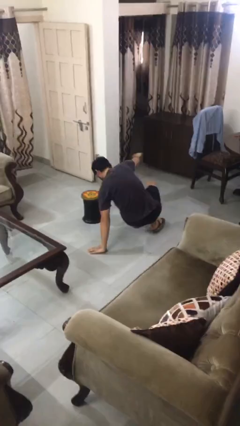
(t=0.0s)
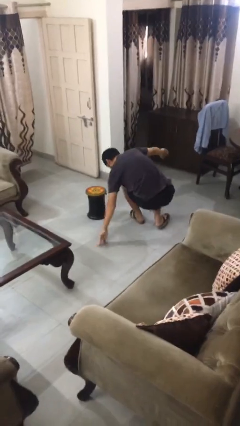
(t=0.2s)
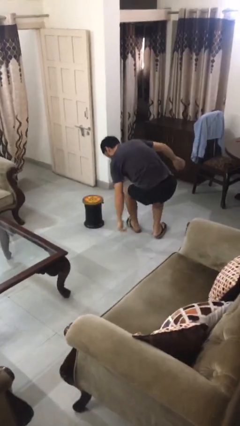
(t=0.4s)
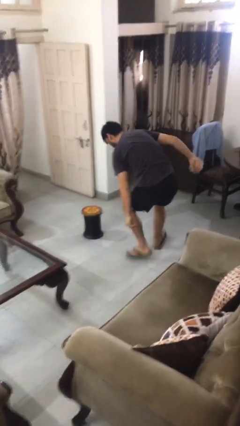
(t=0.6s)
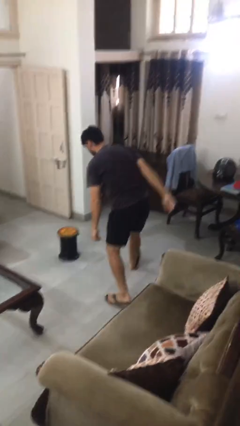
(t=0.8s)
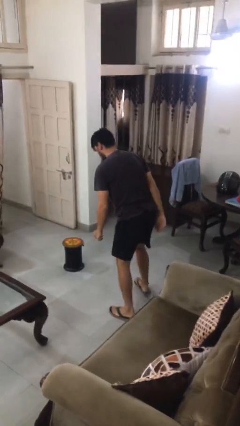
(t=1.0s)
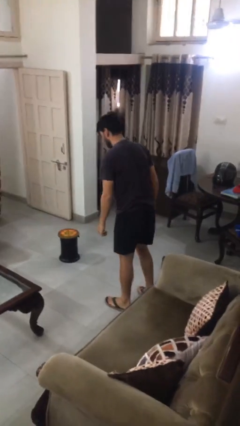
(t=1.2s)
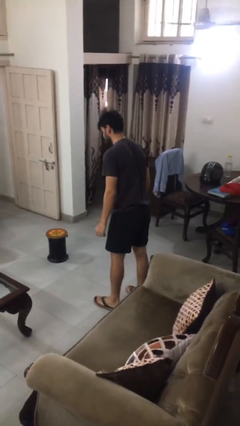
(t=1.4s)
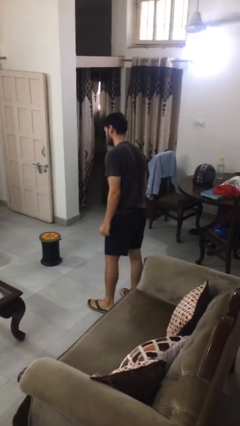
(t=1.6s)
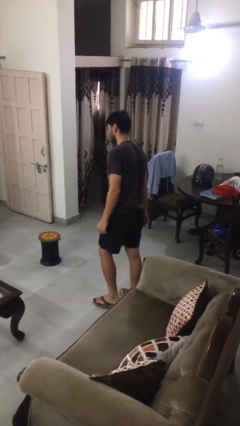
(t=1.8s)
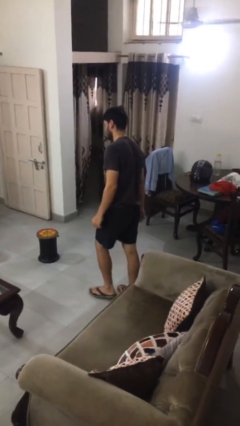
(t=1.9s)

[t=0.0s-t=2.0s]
person stands up from floor

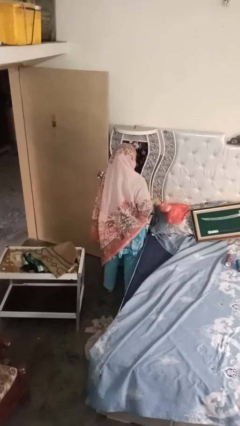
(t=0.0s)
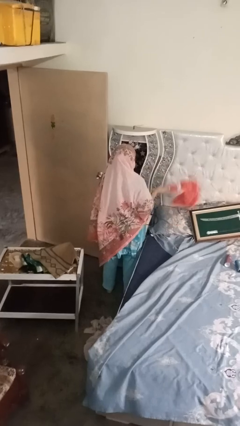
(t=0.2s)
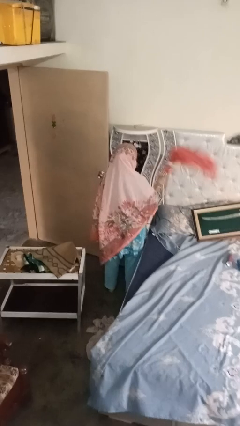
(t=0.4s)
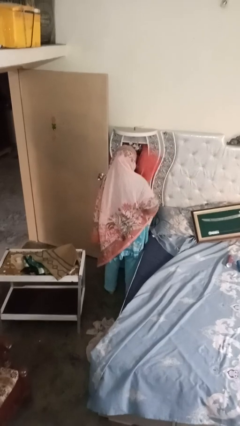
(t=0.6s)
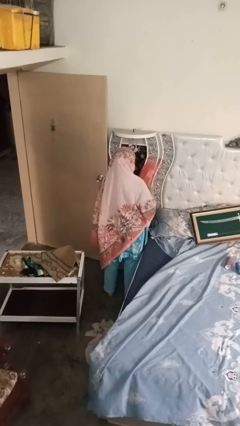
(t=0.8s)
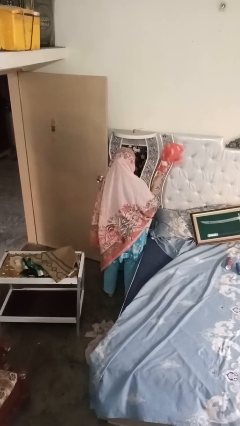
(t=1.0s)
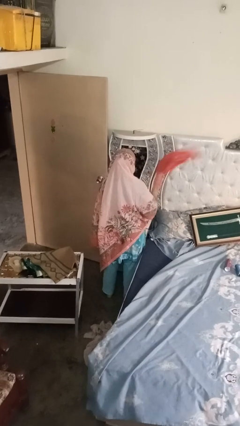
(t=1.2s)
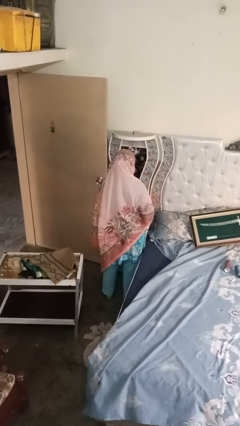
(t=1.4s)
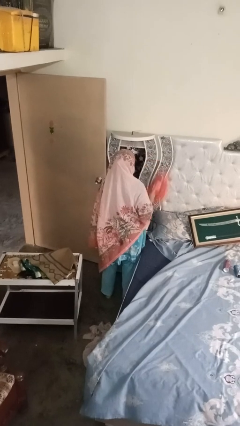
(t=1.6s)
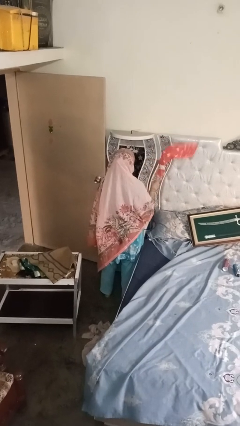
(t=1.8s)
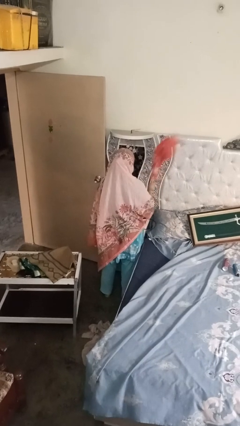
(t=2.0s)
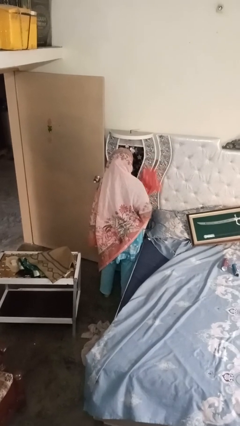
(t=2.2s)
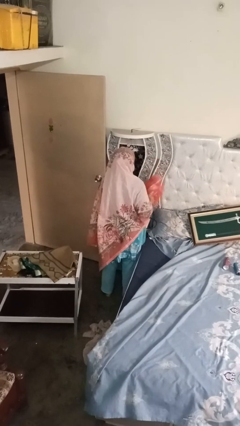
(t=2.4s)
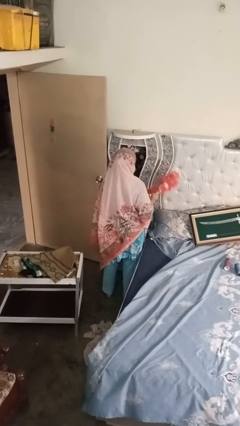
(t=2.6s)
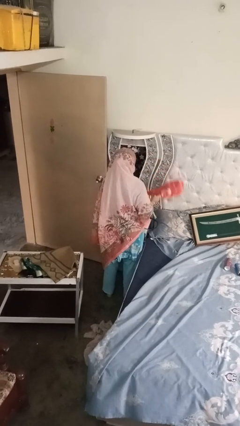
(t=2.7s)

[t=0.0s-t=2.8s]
person dusts furniture

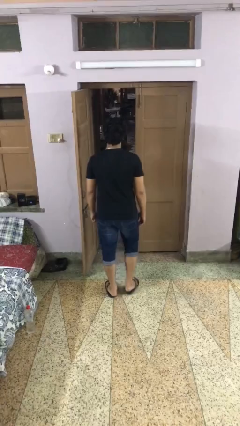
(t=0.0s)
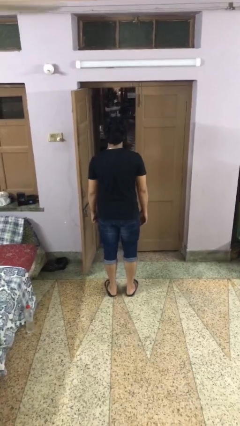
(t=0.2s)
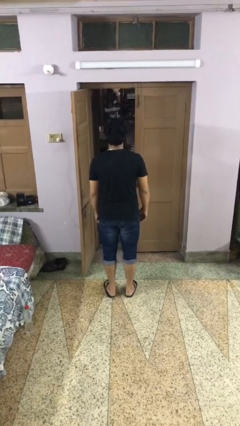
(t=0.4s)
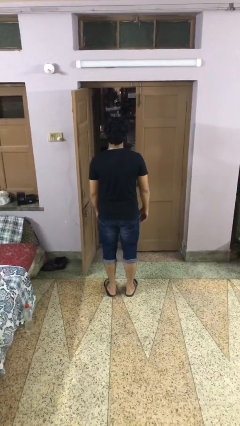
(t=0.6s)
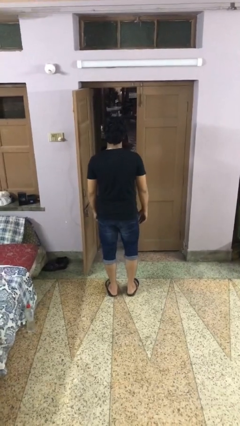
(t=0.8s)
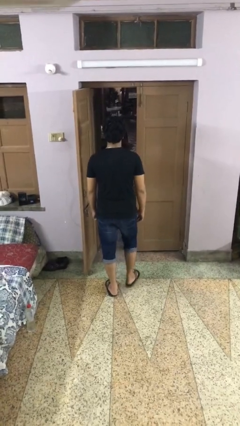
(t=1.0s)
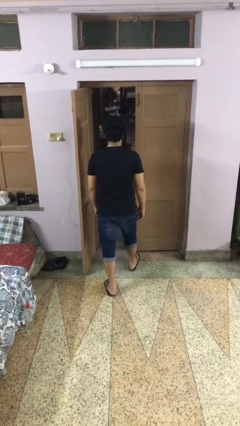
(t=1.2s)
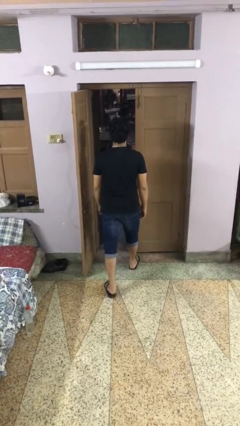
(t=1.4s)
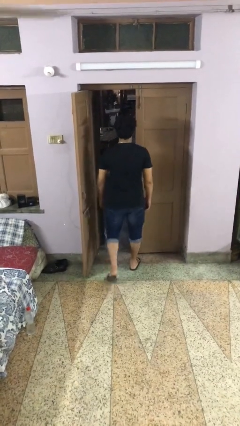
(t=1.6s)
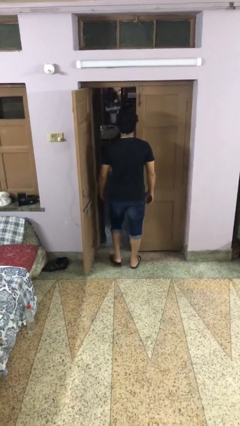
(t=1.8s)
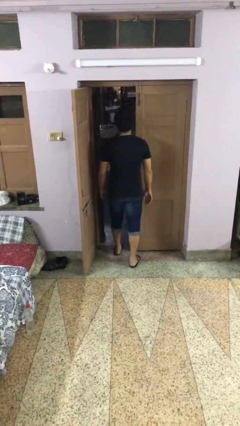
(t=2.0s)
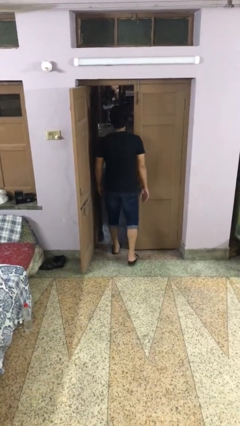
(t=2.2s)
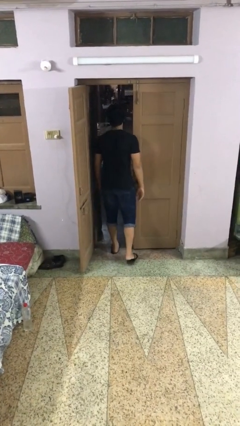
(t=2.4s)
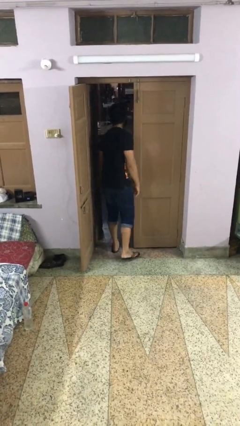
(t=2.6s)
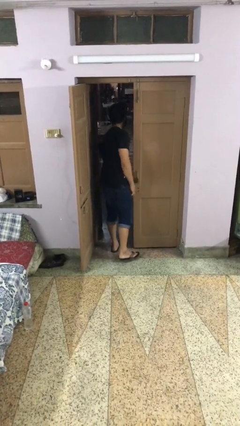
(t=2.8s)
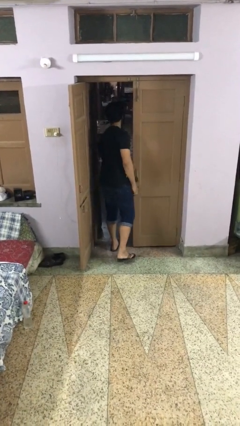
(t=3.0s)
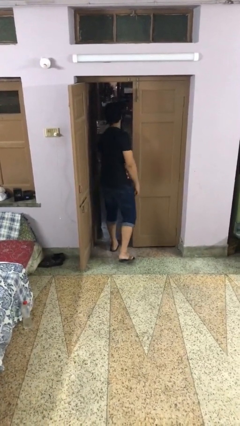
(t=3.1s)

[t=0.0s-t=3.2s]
person bumps into wall

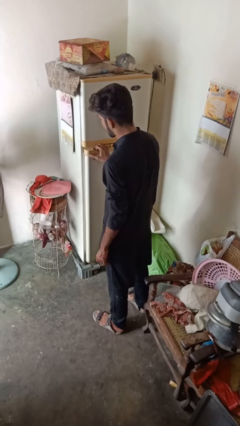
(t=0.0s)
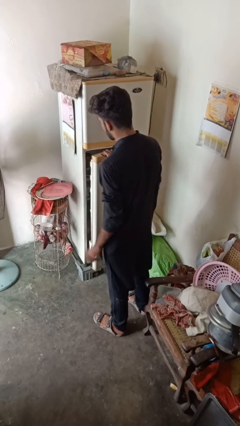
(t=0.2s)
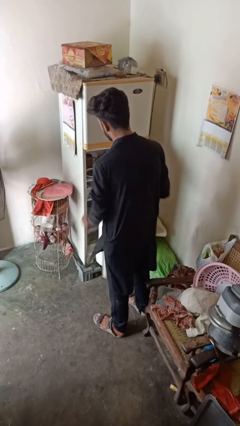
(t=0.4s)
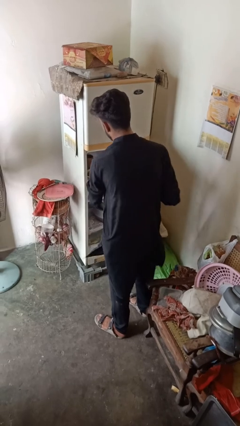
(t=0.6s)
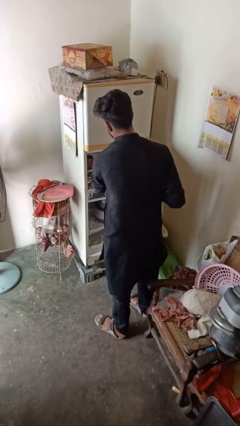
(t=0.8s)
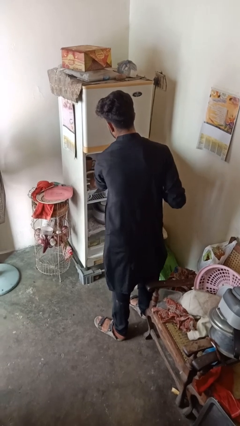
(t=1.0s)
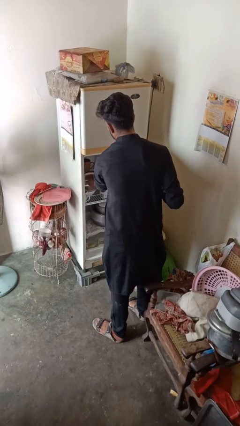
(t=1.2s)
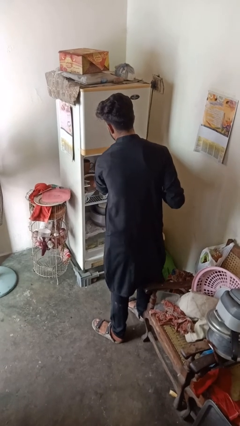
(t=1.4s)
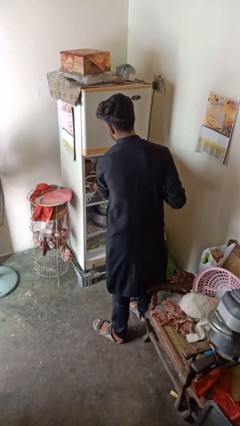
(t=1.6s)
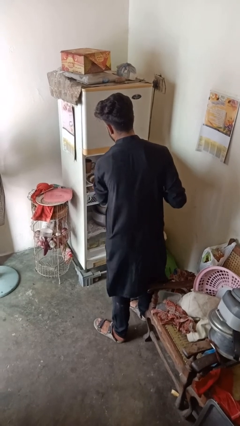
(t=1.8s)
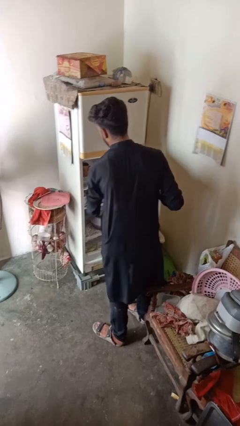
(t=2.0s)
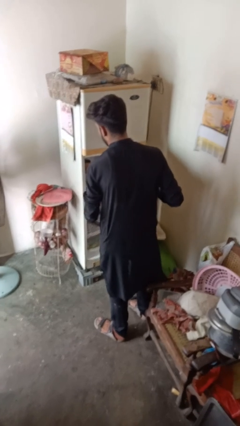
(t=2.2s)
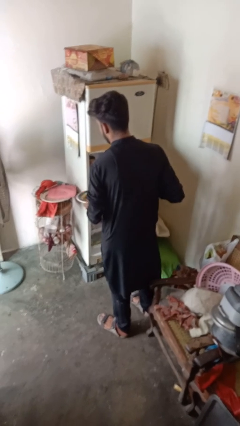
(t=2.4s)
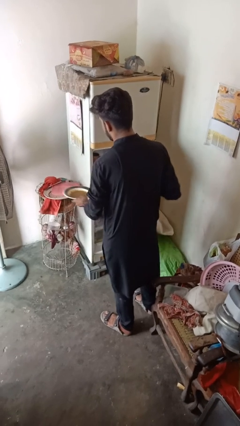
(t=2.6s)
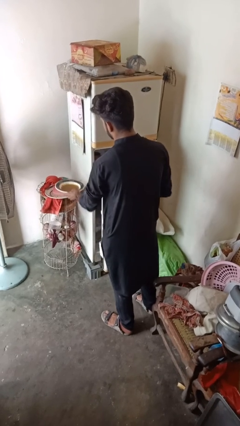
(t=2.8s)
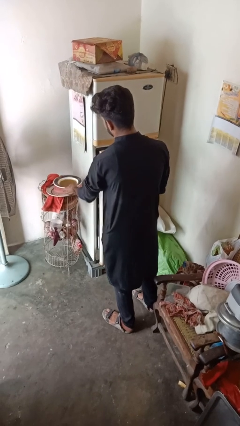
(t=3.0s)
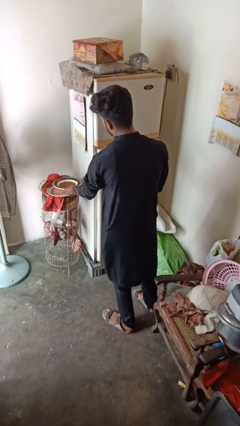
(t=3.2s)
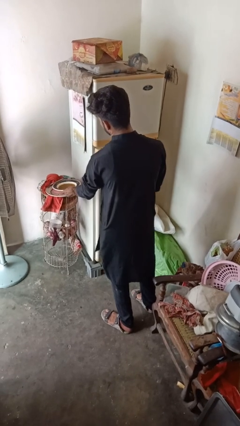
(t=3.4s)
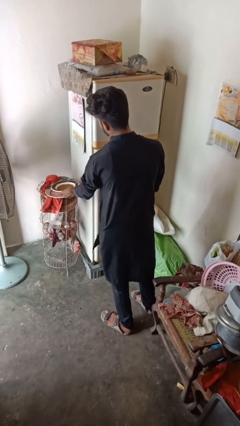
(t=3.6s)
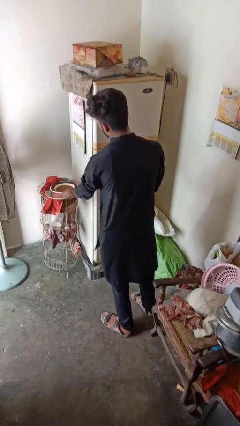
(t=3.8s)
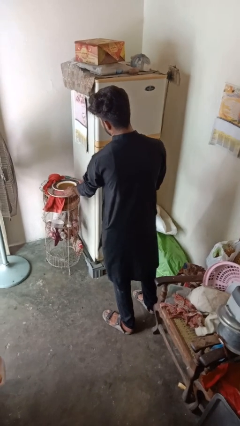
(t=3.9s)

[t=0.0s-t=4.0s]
person takes object from refrigerator

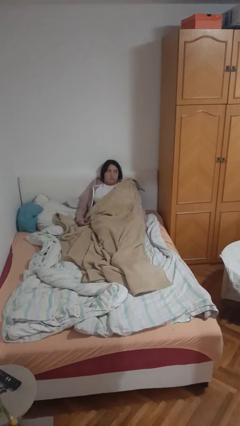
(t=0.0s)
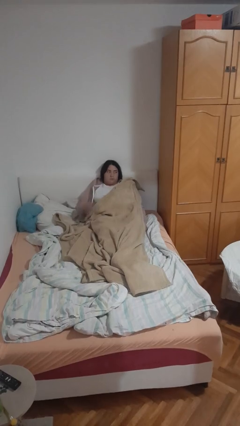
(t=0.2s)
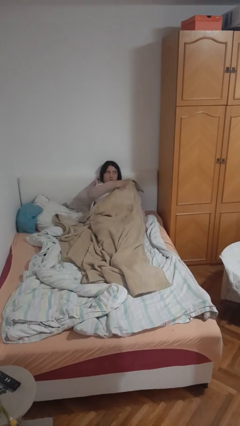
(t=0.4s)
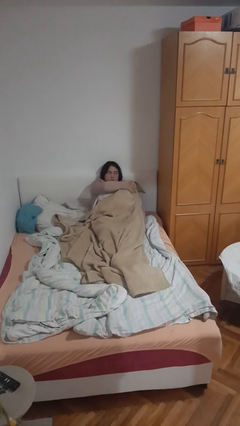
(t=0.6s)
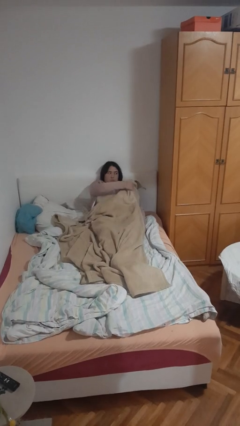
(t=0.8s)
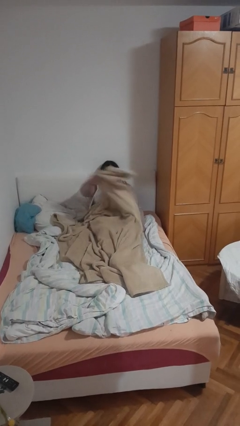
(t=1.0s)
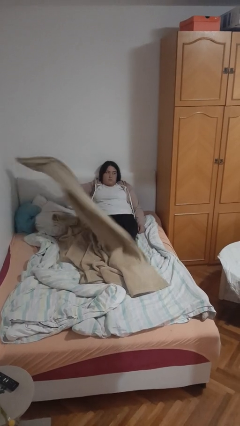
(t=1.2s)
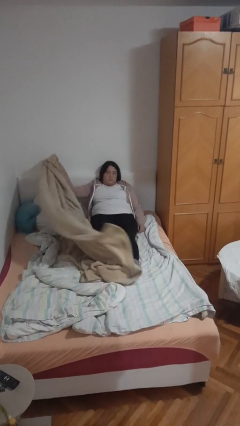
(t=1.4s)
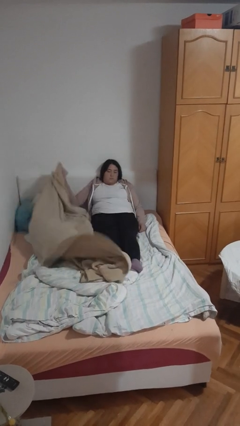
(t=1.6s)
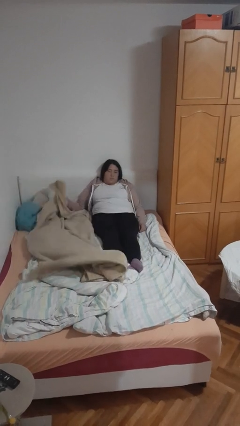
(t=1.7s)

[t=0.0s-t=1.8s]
person uncovers with blanket

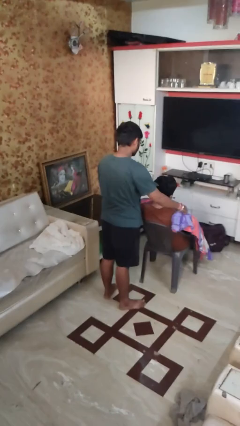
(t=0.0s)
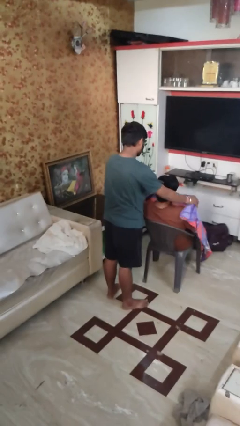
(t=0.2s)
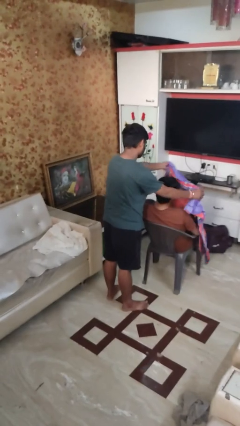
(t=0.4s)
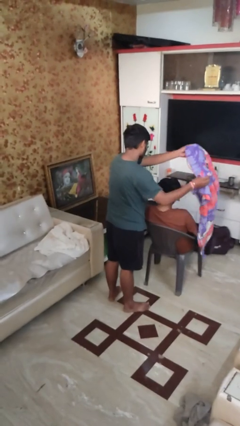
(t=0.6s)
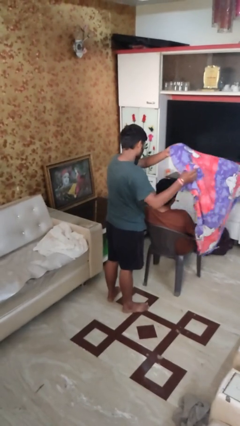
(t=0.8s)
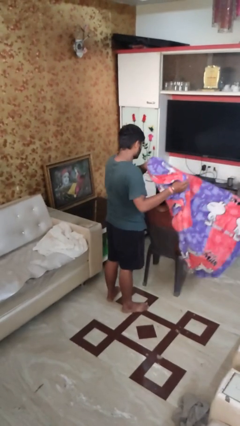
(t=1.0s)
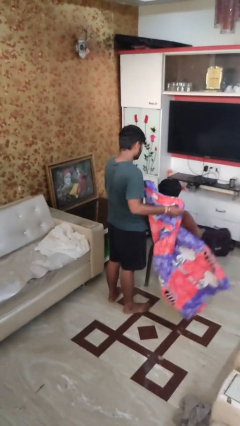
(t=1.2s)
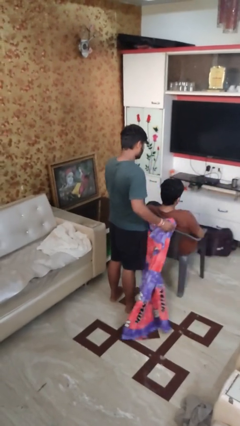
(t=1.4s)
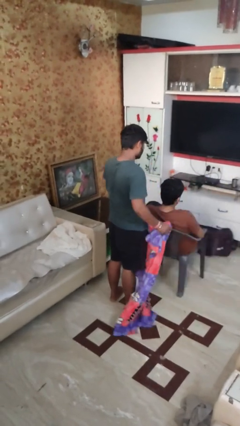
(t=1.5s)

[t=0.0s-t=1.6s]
person uncovers friend with blanket

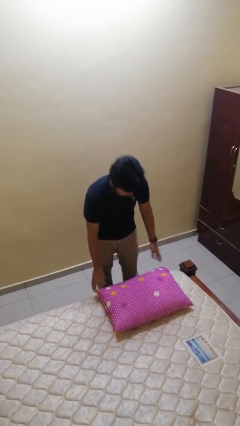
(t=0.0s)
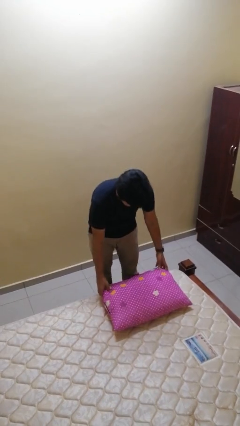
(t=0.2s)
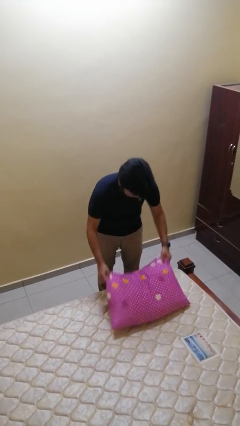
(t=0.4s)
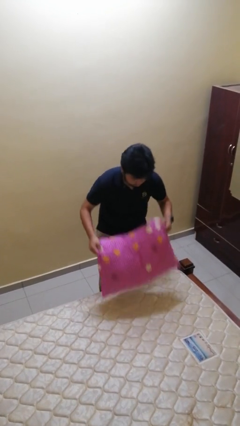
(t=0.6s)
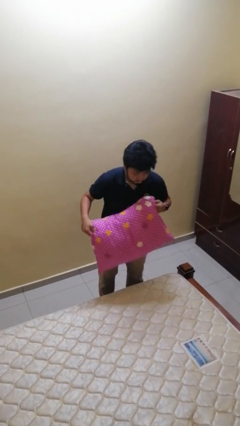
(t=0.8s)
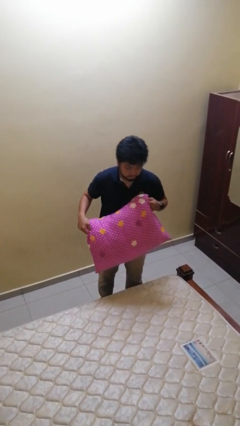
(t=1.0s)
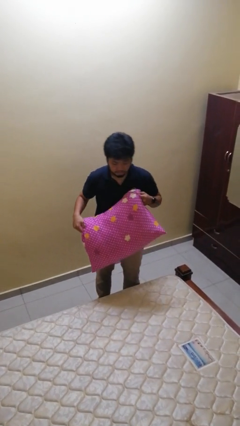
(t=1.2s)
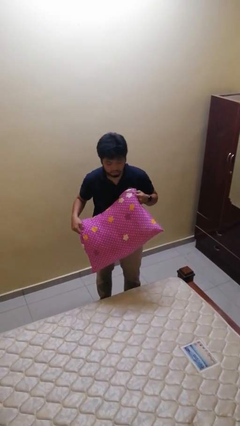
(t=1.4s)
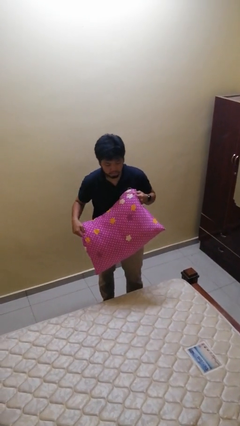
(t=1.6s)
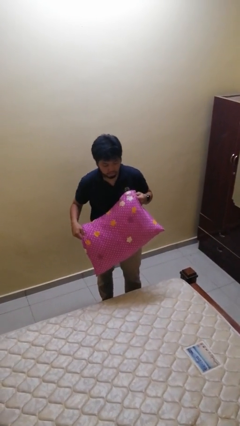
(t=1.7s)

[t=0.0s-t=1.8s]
person picks up object from bed
